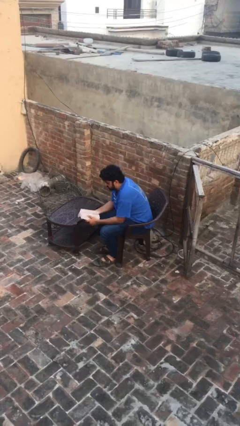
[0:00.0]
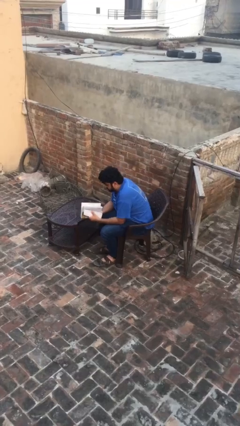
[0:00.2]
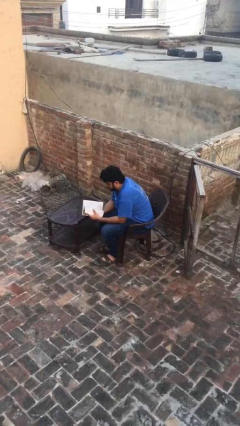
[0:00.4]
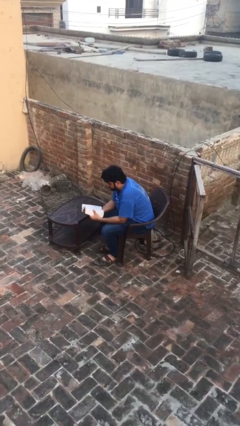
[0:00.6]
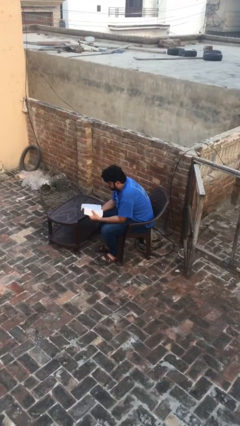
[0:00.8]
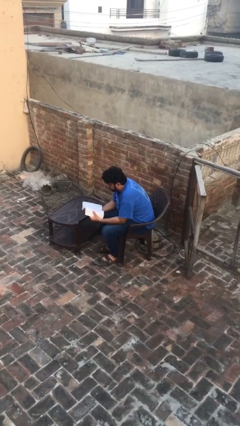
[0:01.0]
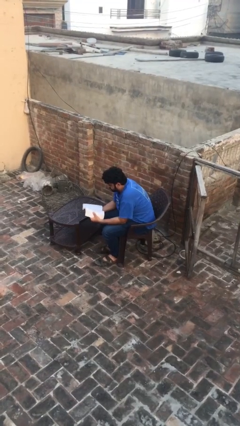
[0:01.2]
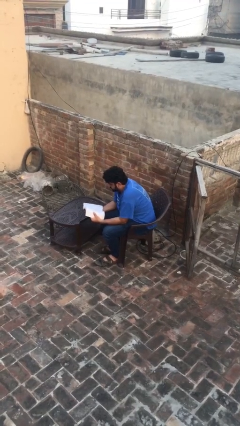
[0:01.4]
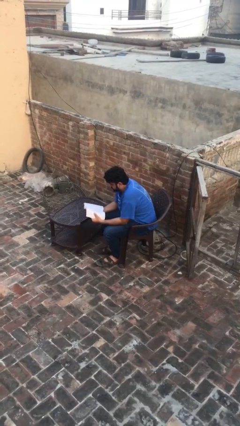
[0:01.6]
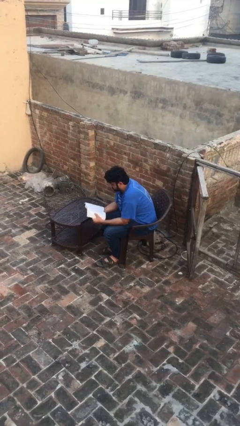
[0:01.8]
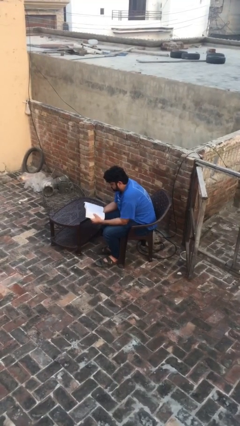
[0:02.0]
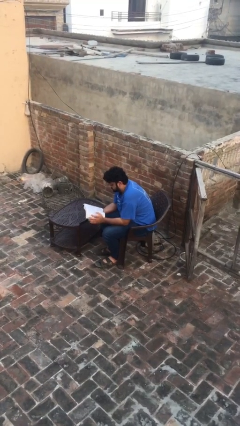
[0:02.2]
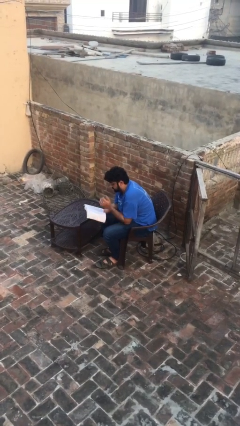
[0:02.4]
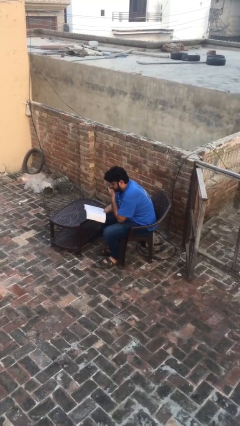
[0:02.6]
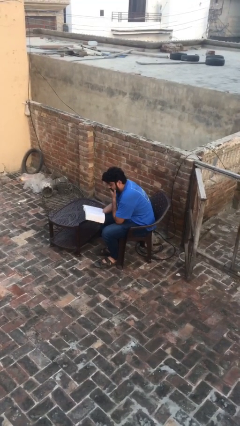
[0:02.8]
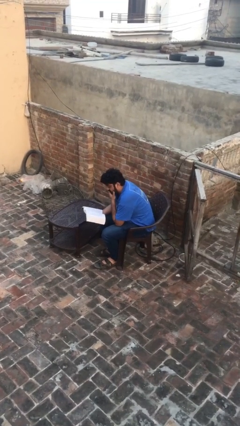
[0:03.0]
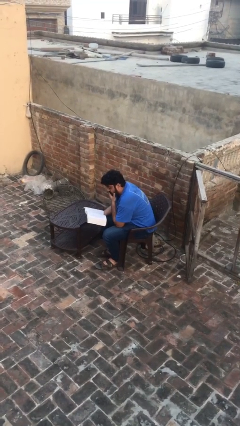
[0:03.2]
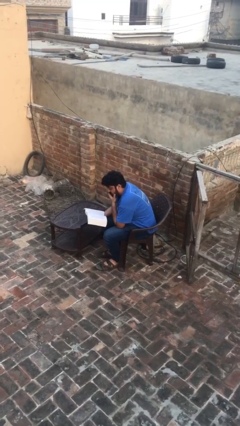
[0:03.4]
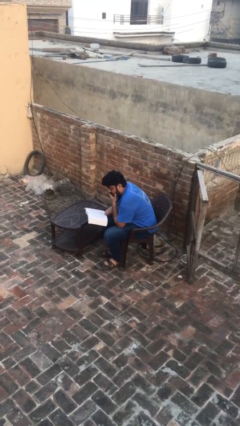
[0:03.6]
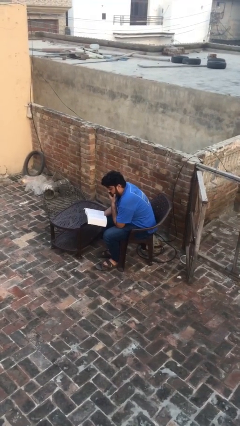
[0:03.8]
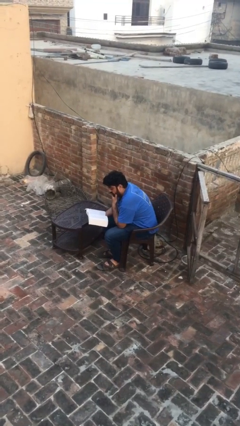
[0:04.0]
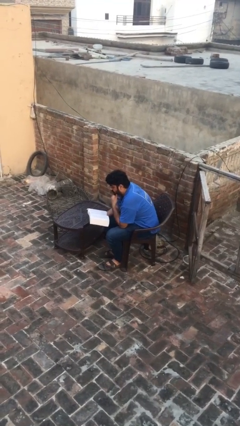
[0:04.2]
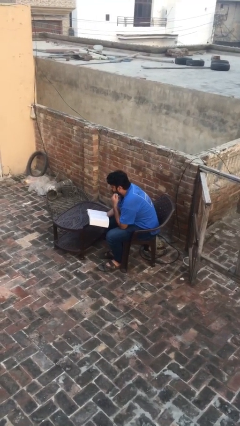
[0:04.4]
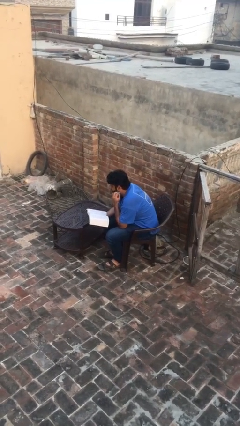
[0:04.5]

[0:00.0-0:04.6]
person reads document

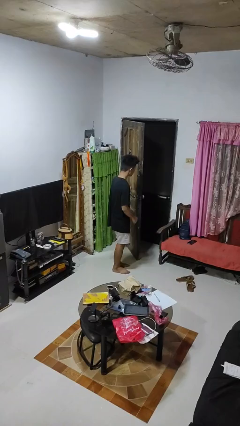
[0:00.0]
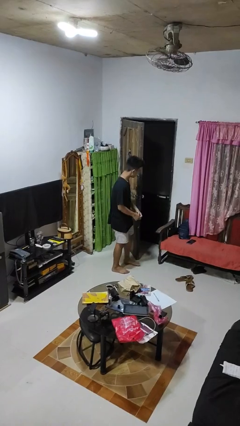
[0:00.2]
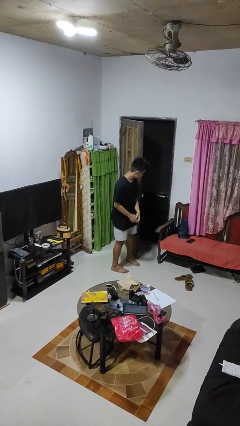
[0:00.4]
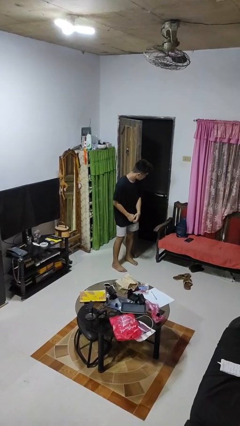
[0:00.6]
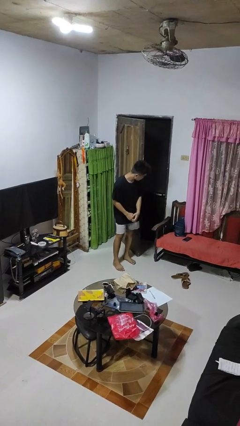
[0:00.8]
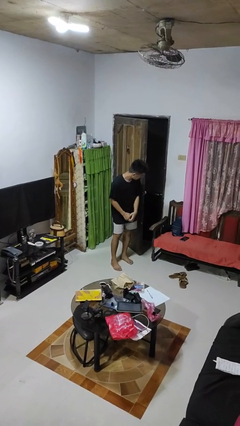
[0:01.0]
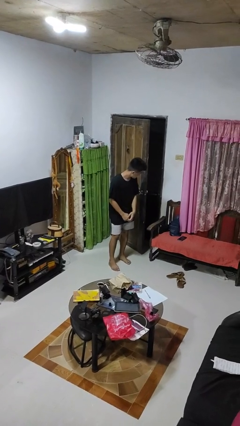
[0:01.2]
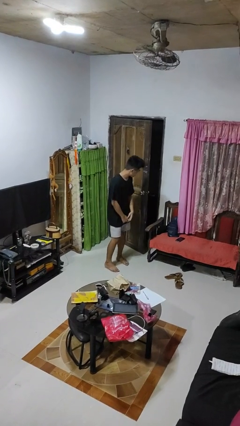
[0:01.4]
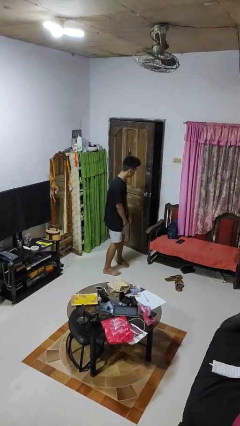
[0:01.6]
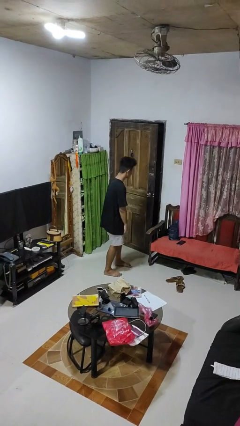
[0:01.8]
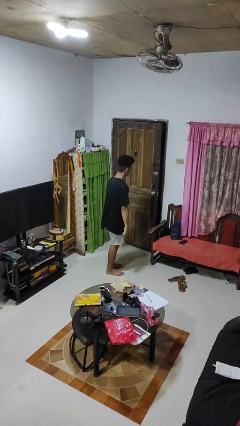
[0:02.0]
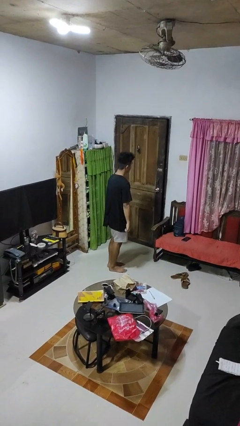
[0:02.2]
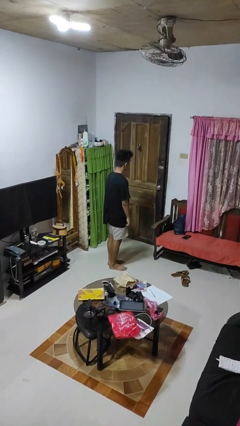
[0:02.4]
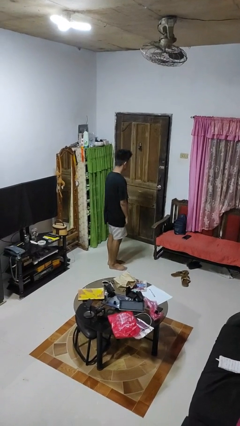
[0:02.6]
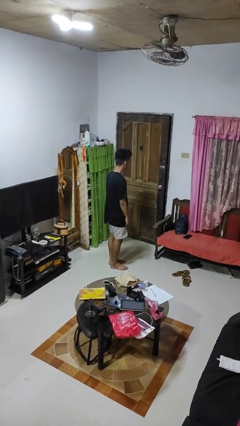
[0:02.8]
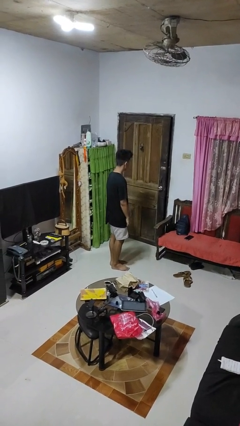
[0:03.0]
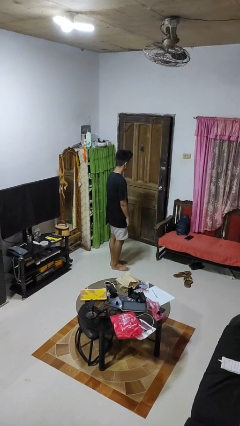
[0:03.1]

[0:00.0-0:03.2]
person closes door with hip

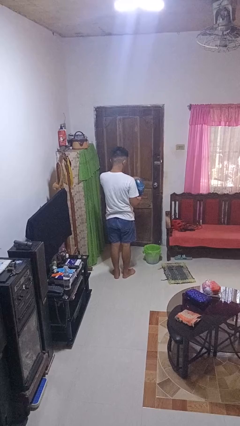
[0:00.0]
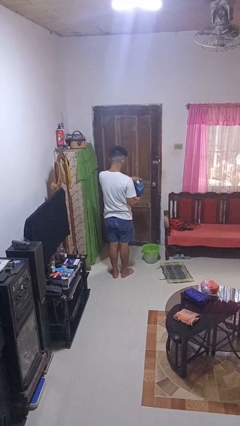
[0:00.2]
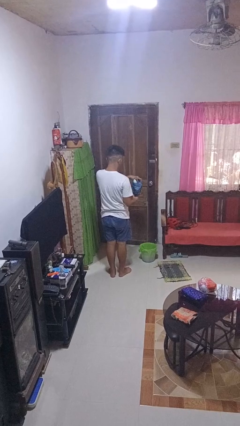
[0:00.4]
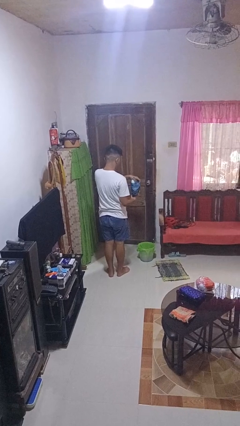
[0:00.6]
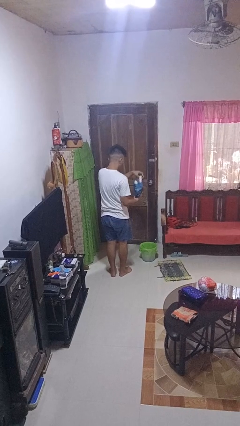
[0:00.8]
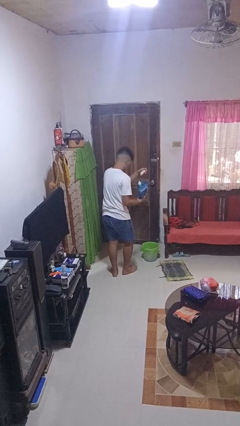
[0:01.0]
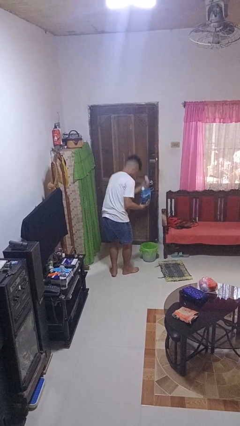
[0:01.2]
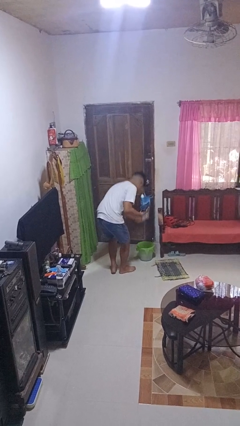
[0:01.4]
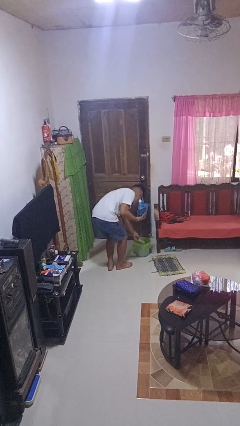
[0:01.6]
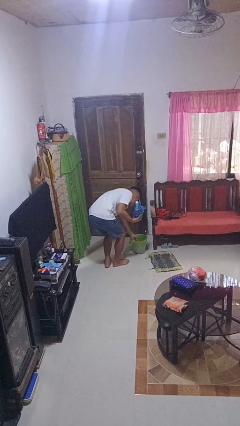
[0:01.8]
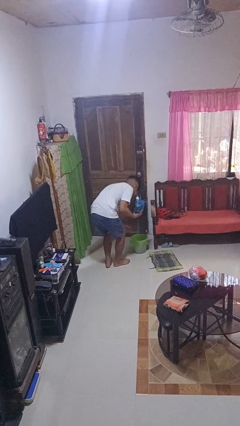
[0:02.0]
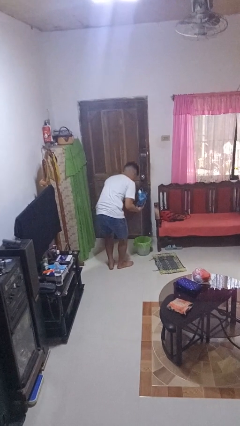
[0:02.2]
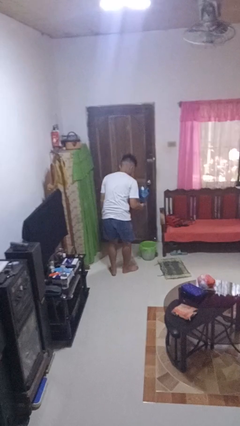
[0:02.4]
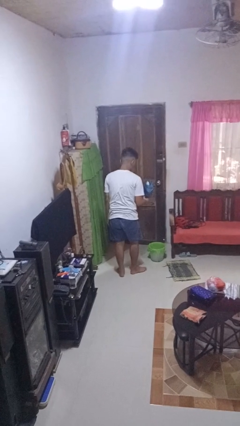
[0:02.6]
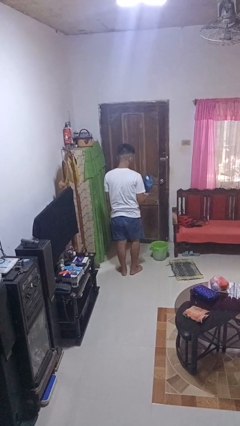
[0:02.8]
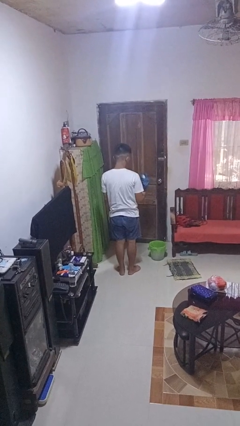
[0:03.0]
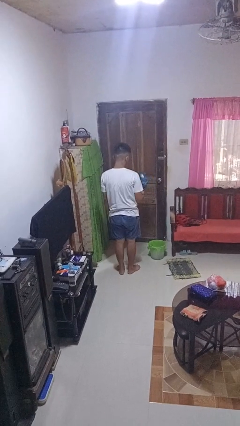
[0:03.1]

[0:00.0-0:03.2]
person discards trash

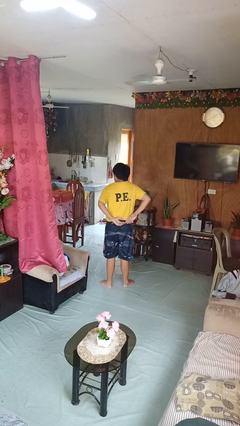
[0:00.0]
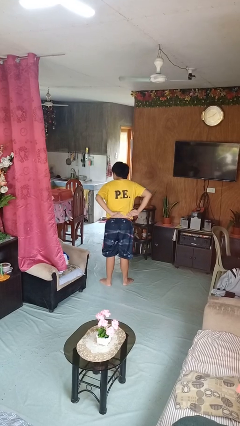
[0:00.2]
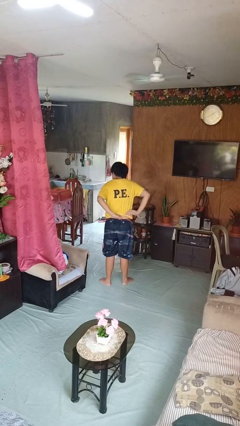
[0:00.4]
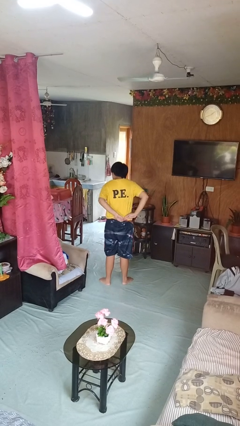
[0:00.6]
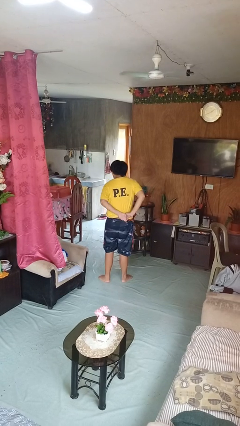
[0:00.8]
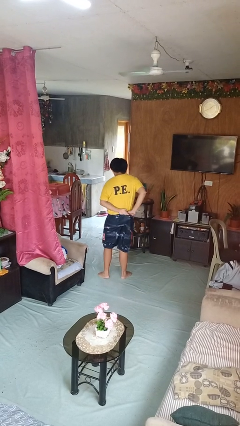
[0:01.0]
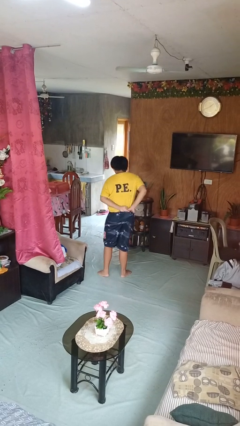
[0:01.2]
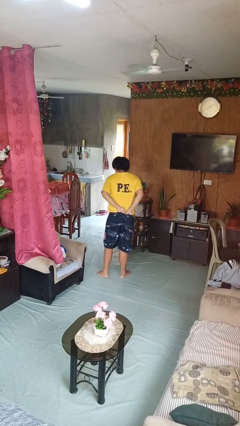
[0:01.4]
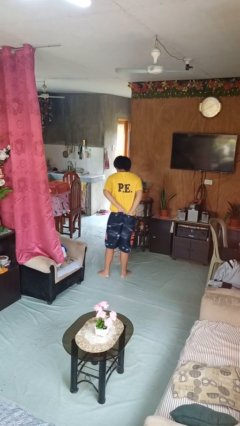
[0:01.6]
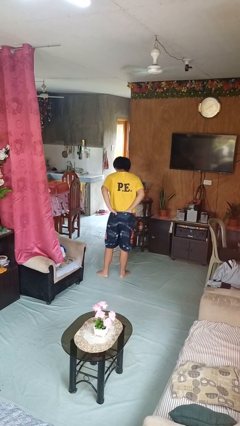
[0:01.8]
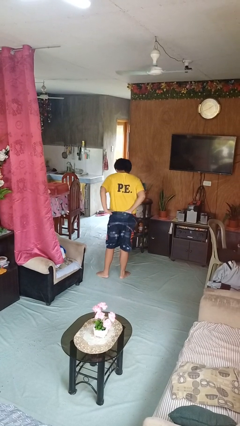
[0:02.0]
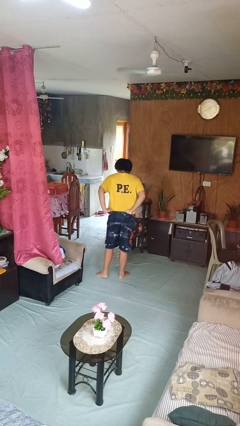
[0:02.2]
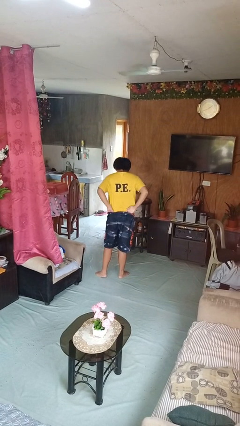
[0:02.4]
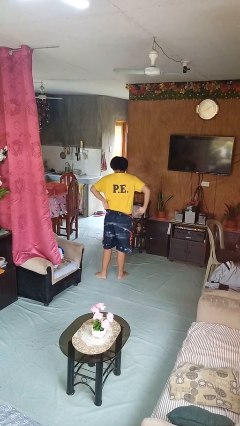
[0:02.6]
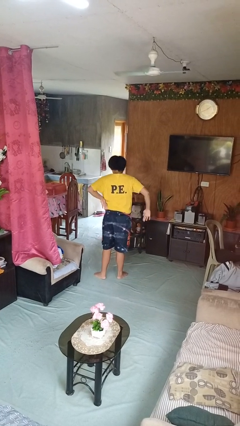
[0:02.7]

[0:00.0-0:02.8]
person tucks in shirt

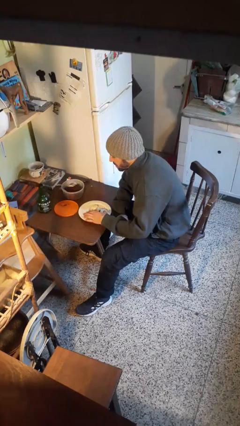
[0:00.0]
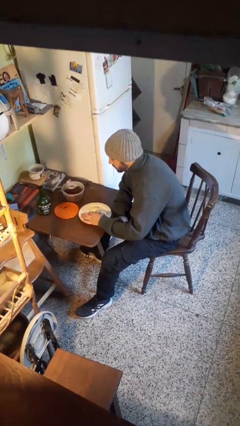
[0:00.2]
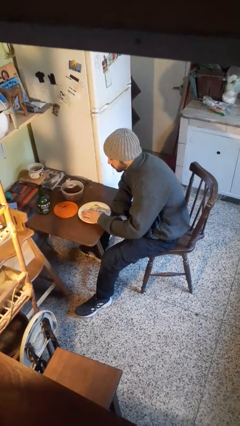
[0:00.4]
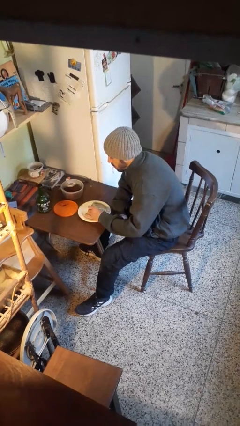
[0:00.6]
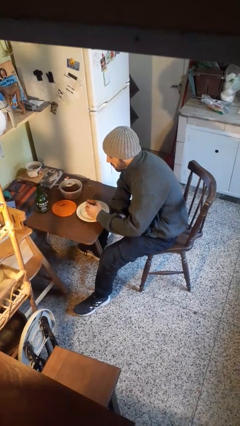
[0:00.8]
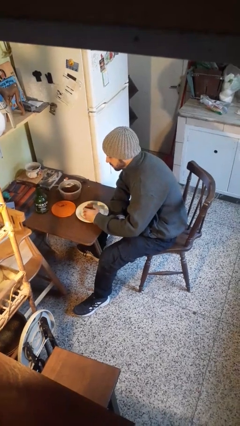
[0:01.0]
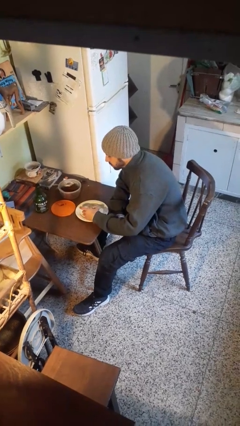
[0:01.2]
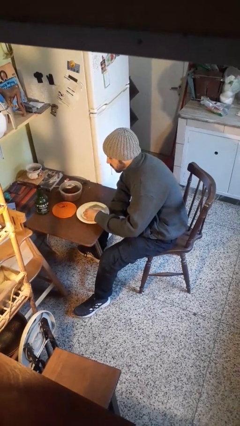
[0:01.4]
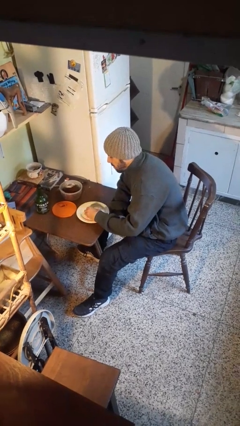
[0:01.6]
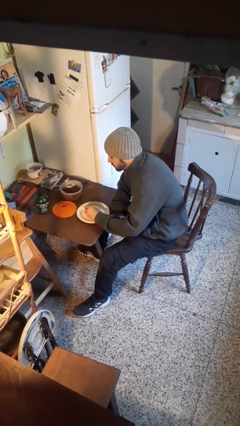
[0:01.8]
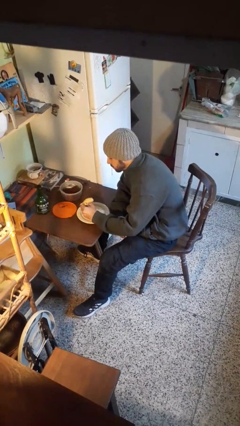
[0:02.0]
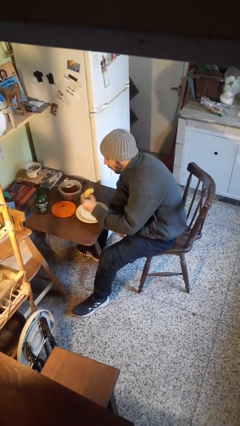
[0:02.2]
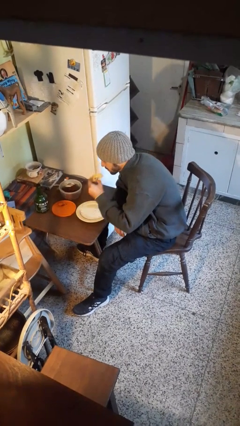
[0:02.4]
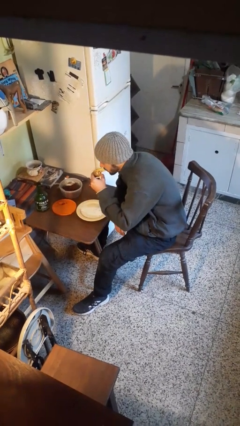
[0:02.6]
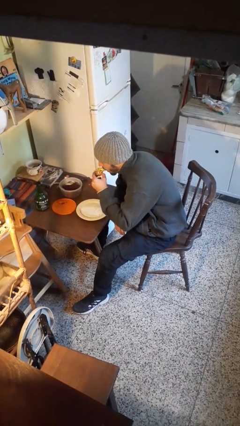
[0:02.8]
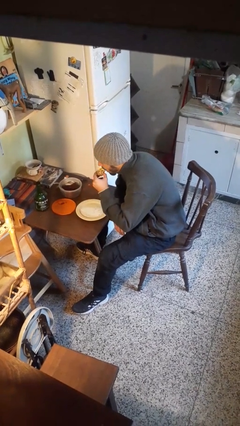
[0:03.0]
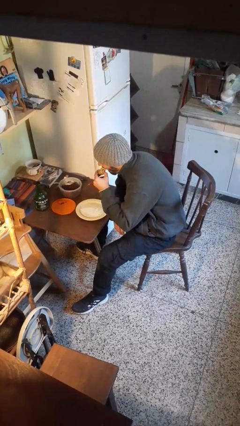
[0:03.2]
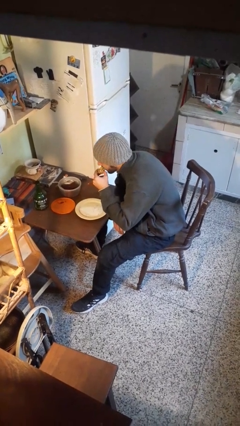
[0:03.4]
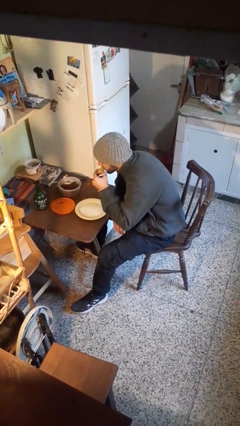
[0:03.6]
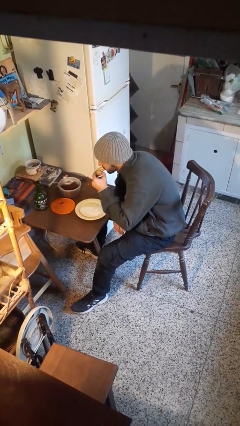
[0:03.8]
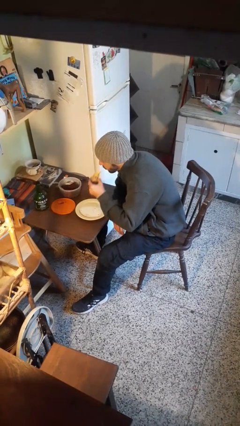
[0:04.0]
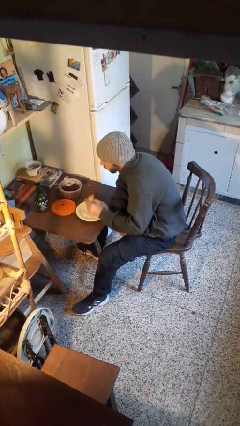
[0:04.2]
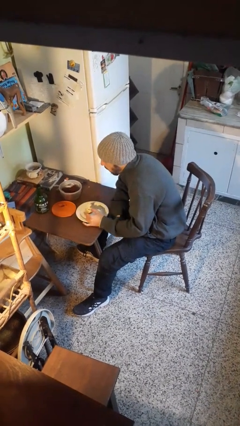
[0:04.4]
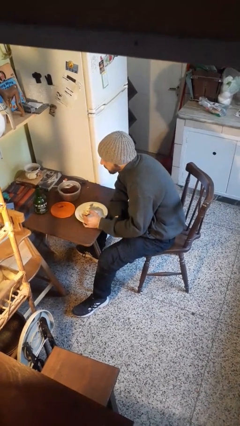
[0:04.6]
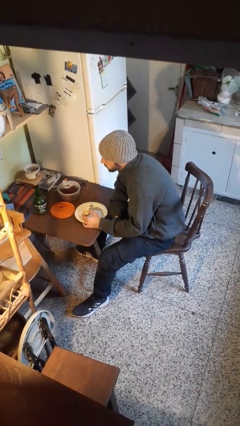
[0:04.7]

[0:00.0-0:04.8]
person eats with hands
